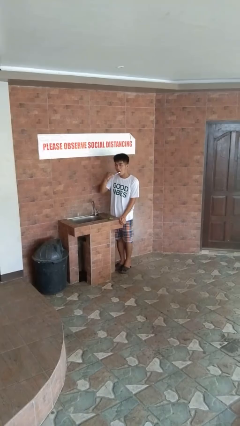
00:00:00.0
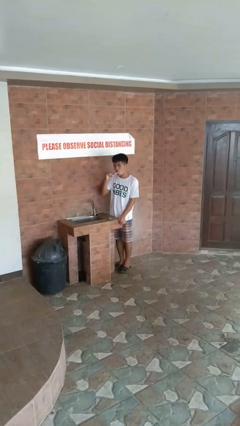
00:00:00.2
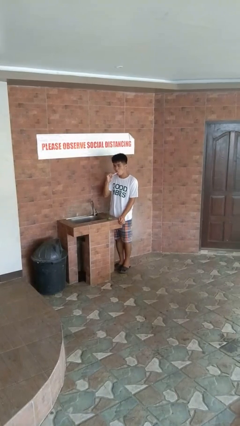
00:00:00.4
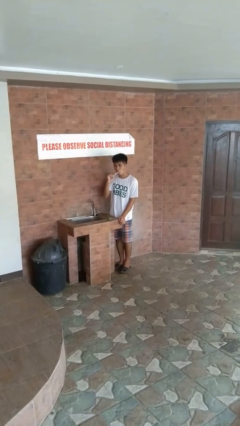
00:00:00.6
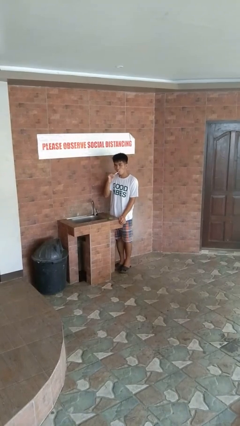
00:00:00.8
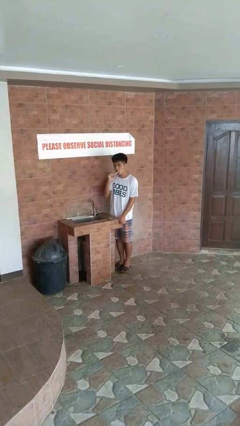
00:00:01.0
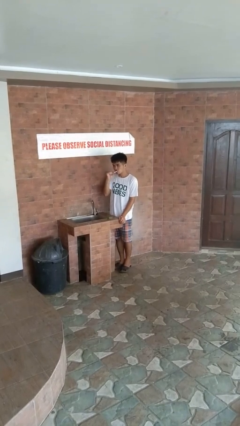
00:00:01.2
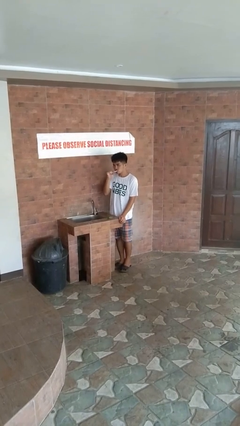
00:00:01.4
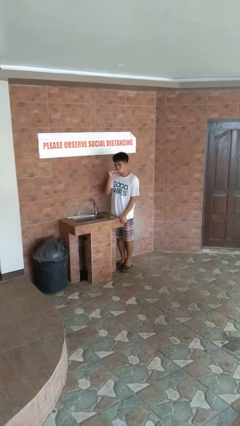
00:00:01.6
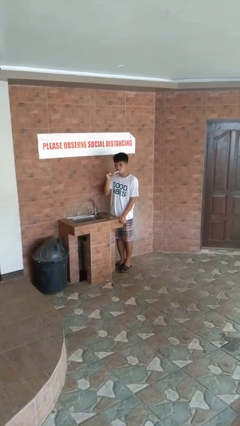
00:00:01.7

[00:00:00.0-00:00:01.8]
person brushes teeth

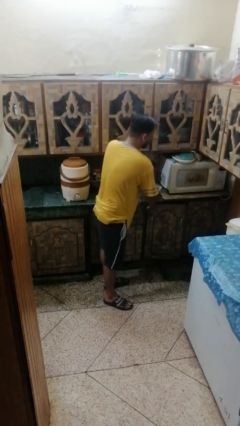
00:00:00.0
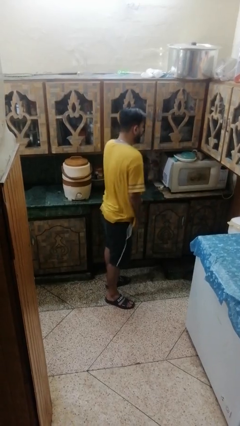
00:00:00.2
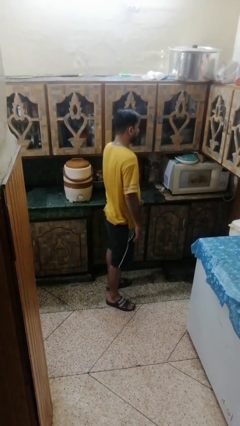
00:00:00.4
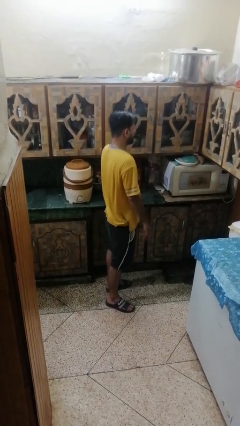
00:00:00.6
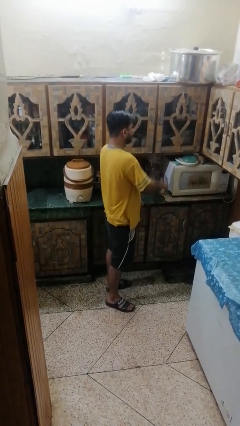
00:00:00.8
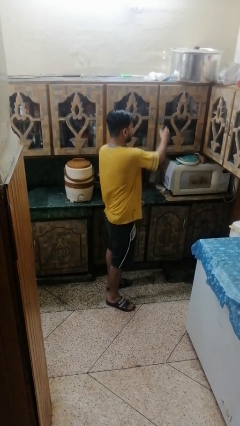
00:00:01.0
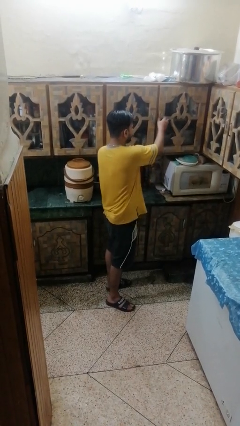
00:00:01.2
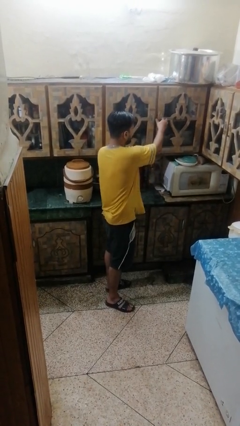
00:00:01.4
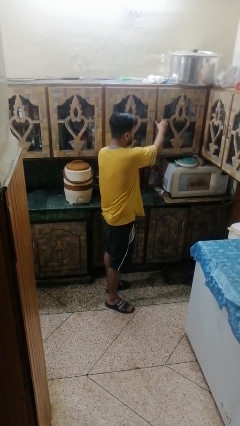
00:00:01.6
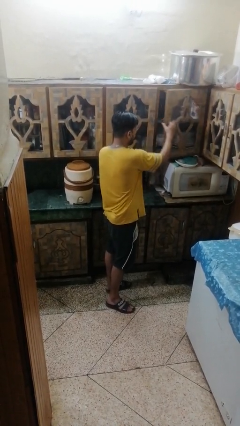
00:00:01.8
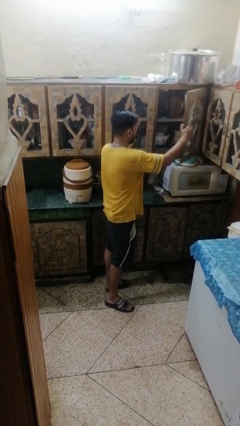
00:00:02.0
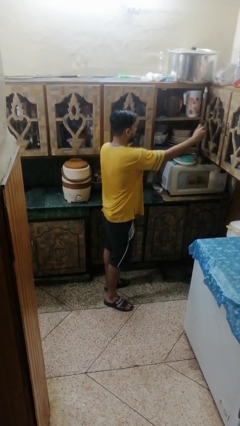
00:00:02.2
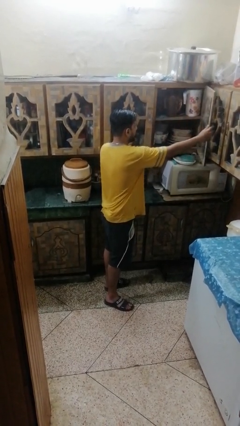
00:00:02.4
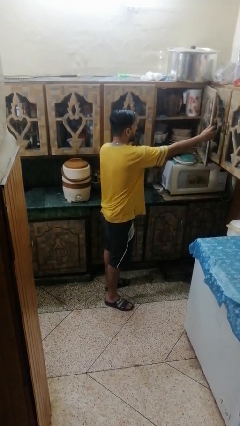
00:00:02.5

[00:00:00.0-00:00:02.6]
person closes cabinet

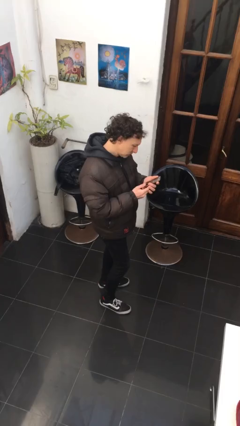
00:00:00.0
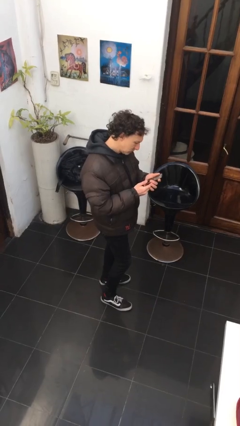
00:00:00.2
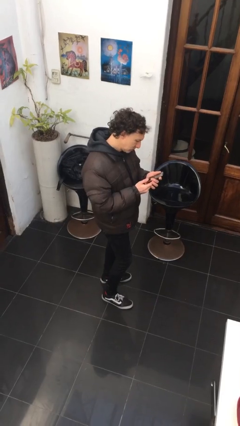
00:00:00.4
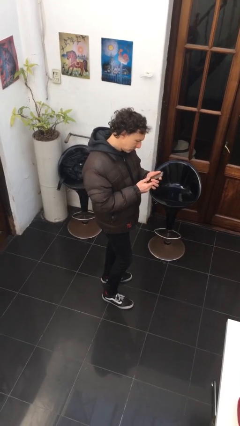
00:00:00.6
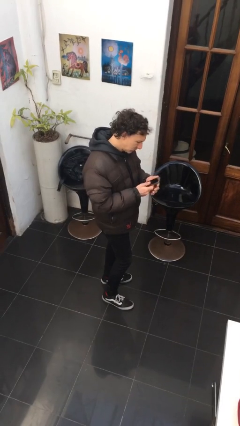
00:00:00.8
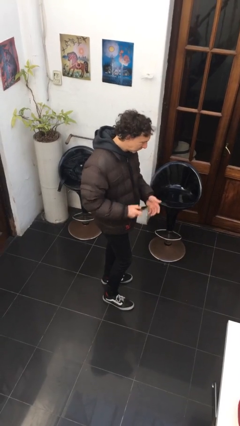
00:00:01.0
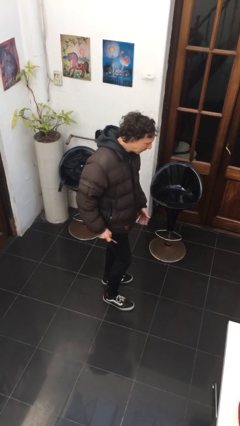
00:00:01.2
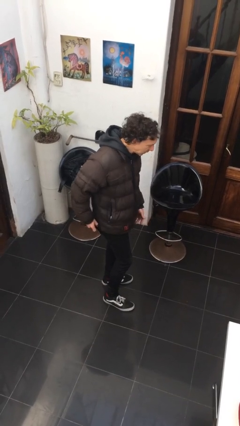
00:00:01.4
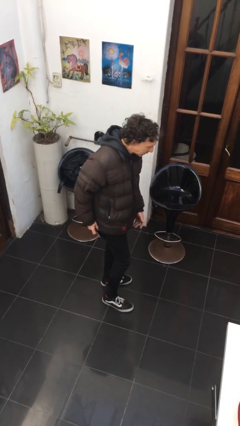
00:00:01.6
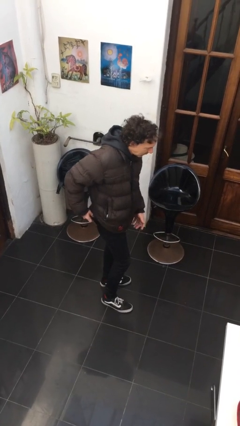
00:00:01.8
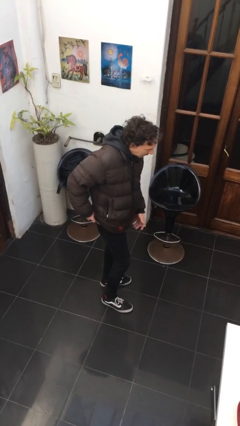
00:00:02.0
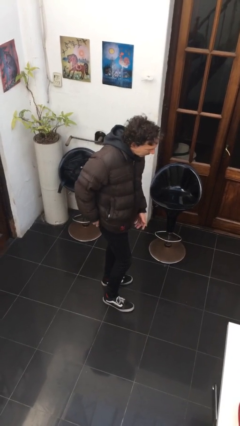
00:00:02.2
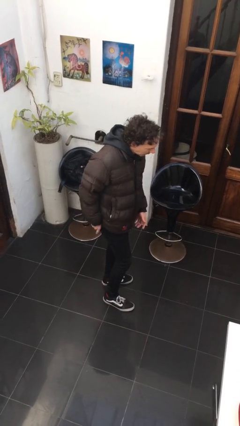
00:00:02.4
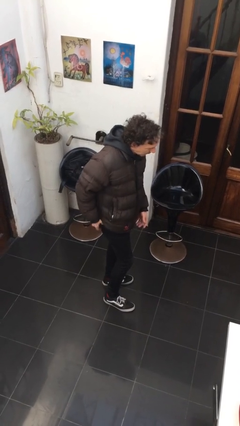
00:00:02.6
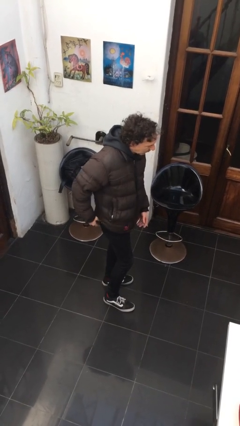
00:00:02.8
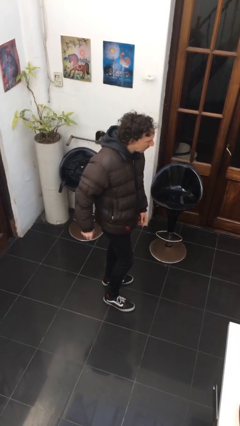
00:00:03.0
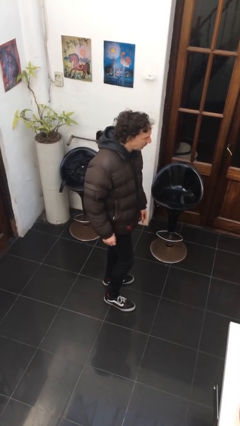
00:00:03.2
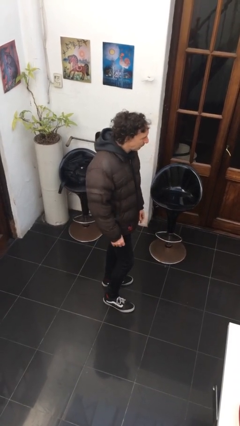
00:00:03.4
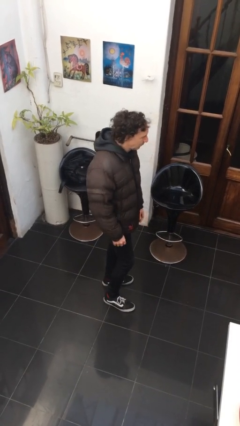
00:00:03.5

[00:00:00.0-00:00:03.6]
person puts phone into pocket

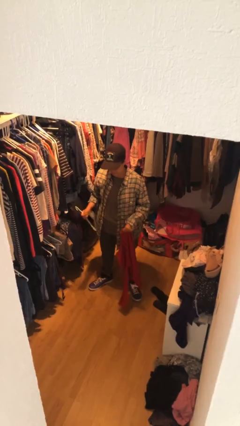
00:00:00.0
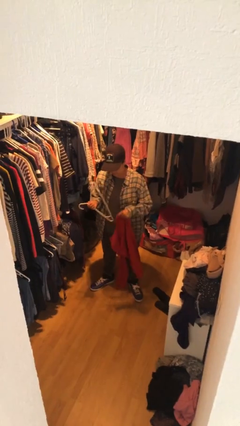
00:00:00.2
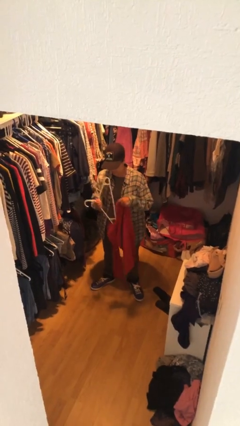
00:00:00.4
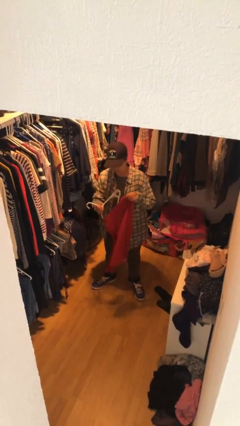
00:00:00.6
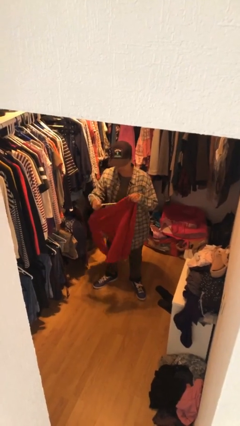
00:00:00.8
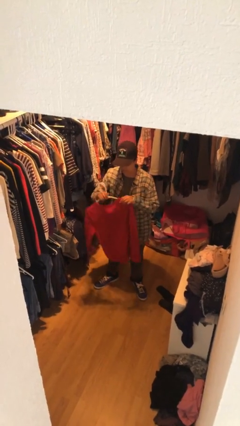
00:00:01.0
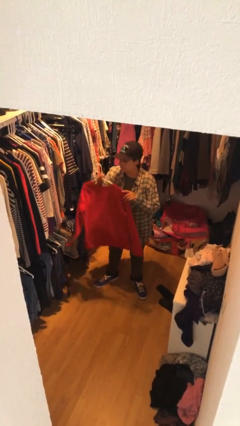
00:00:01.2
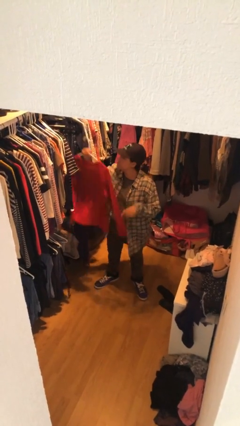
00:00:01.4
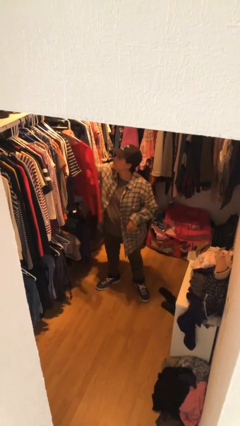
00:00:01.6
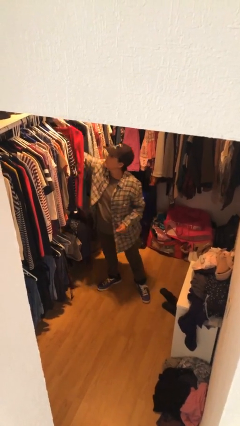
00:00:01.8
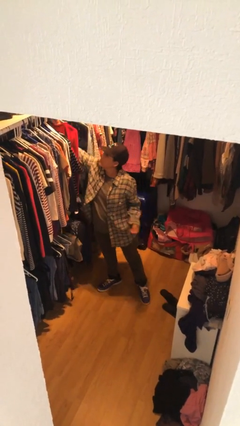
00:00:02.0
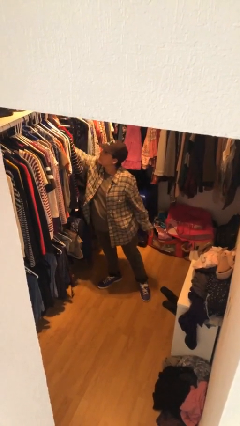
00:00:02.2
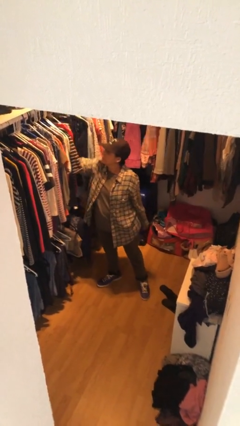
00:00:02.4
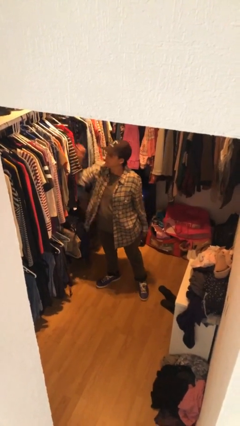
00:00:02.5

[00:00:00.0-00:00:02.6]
person puts clothes into closet

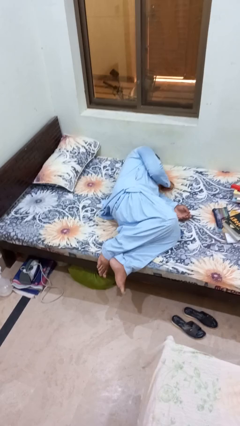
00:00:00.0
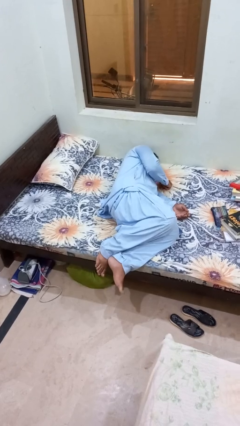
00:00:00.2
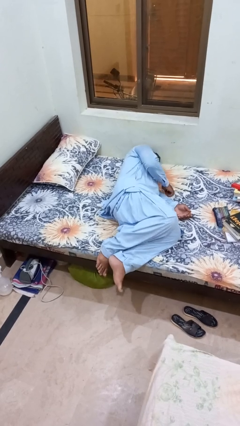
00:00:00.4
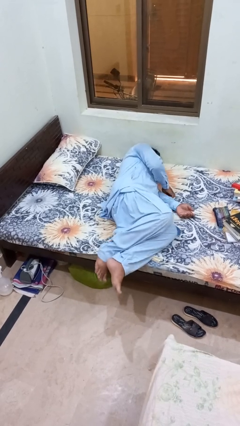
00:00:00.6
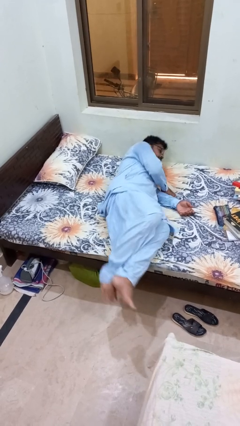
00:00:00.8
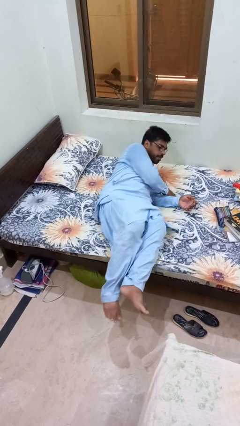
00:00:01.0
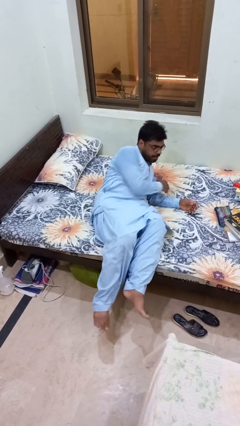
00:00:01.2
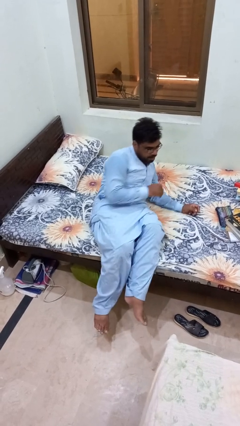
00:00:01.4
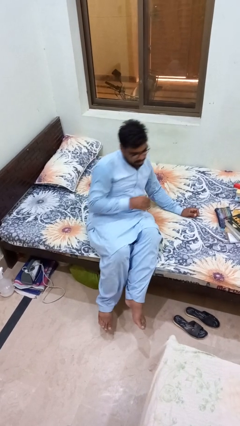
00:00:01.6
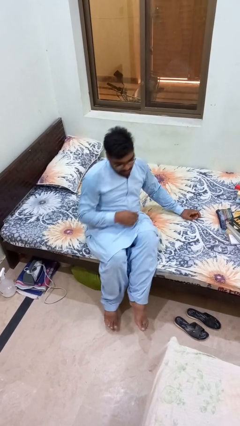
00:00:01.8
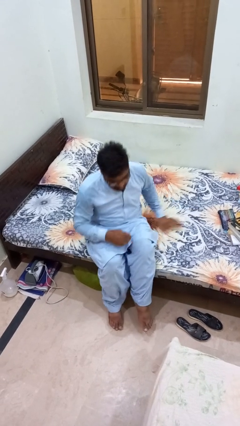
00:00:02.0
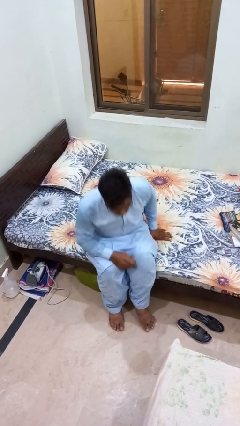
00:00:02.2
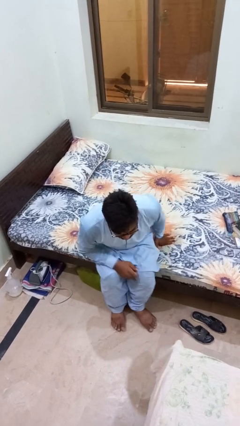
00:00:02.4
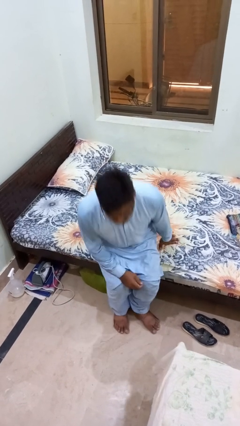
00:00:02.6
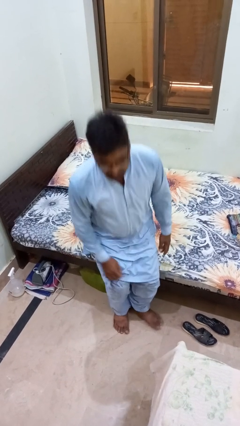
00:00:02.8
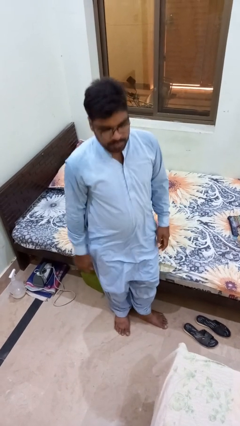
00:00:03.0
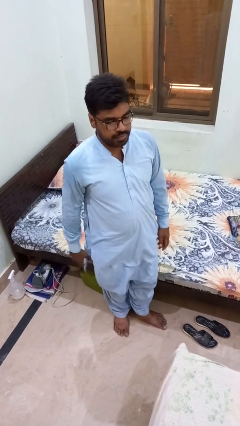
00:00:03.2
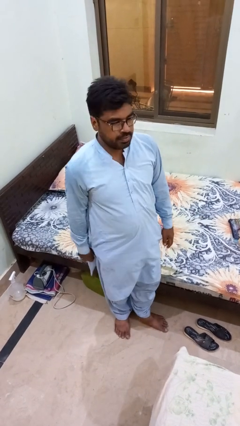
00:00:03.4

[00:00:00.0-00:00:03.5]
person stands up

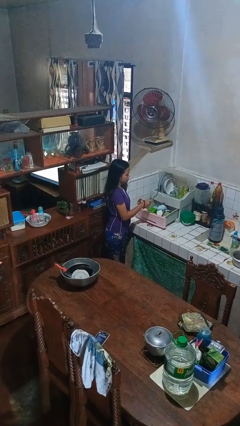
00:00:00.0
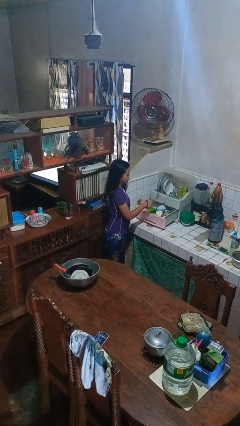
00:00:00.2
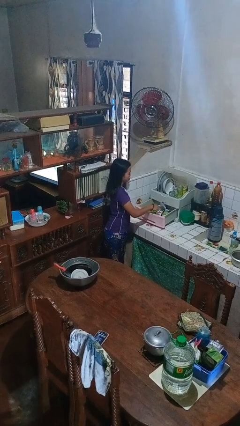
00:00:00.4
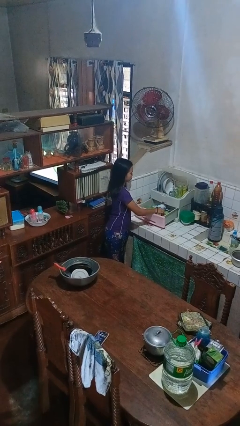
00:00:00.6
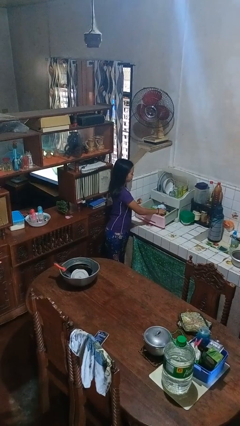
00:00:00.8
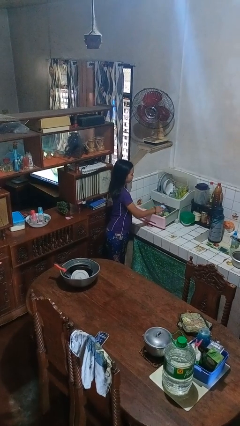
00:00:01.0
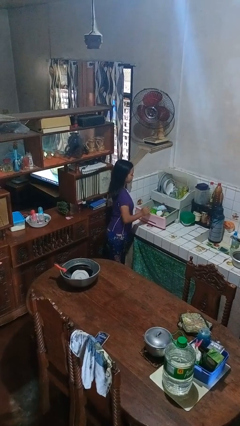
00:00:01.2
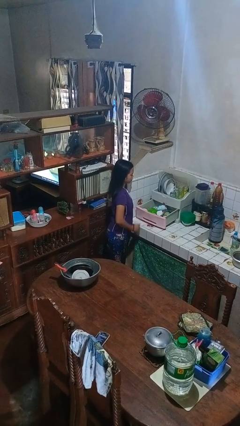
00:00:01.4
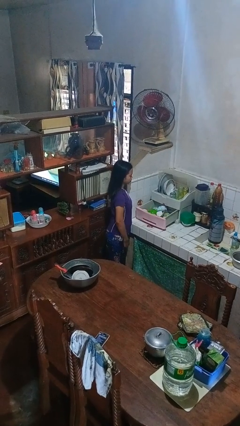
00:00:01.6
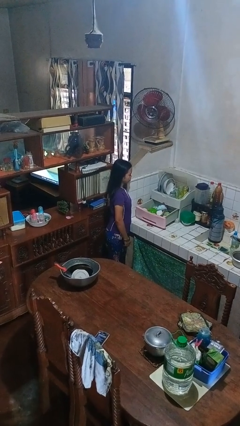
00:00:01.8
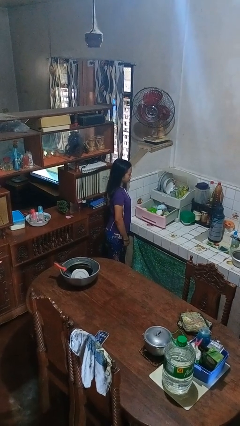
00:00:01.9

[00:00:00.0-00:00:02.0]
person puts object into kitchen drawer

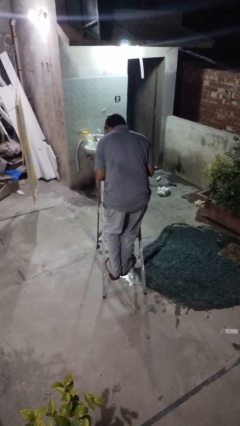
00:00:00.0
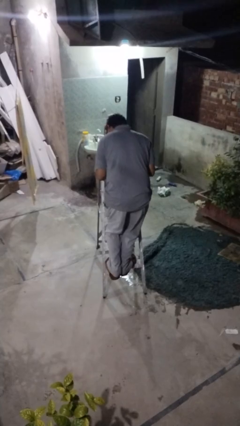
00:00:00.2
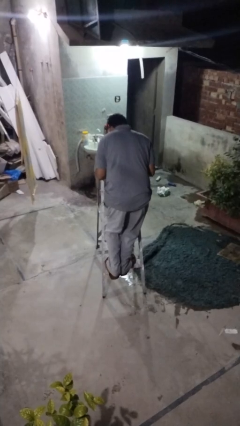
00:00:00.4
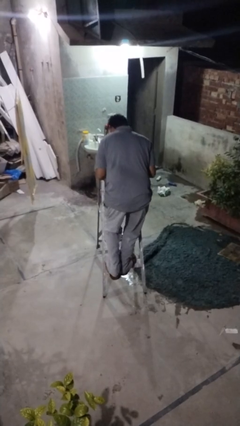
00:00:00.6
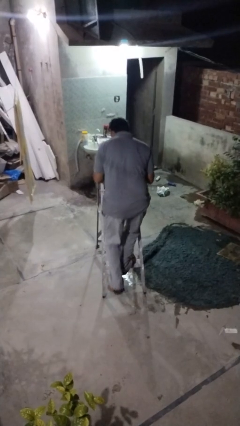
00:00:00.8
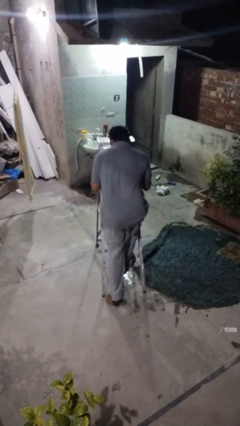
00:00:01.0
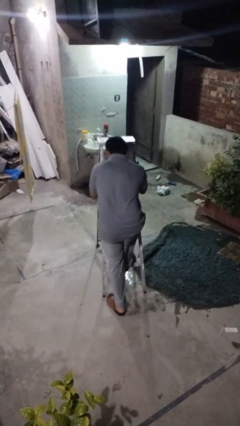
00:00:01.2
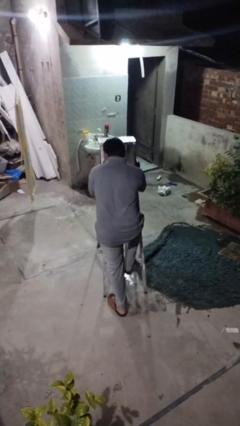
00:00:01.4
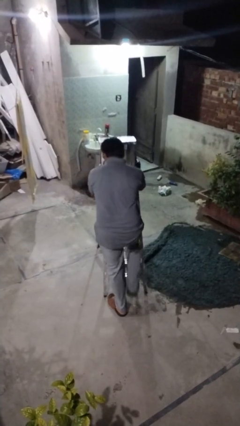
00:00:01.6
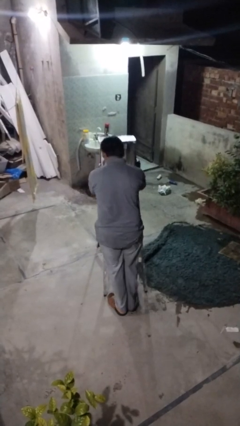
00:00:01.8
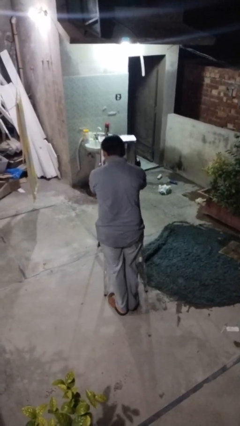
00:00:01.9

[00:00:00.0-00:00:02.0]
person climbs down ladder
